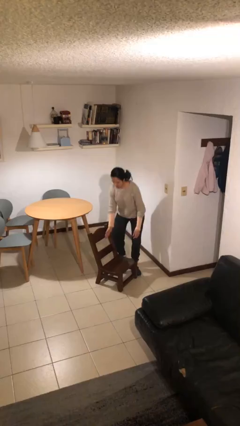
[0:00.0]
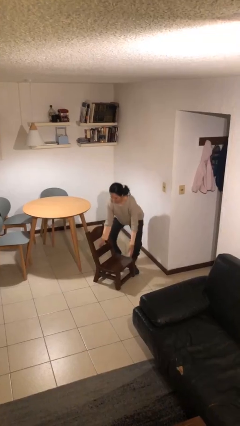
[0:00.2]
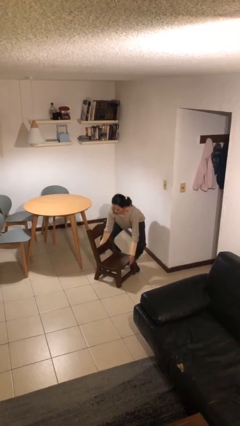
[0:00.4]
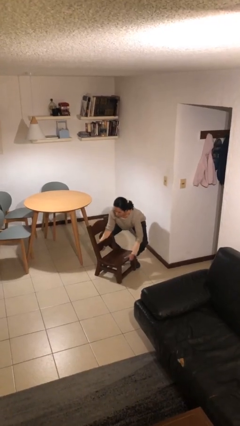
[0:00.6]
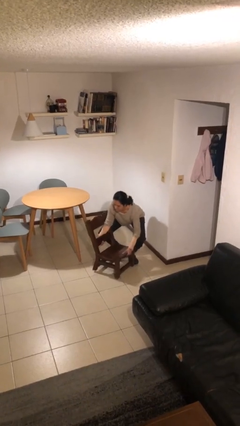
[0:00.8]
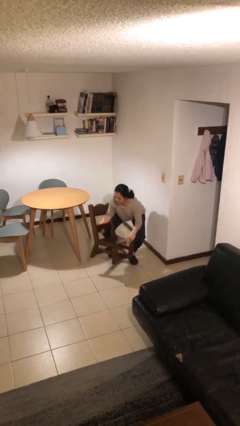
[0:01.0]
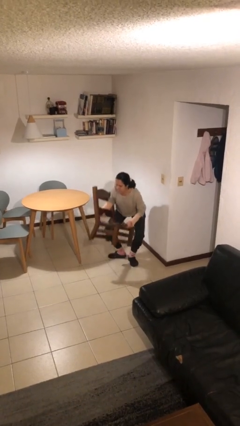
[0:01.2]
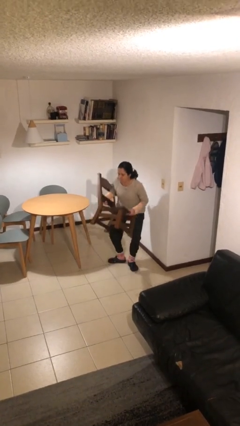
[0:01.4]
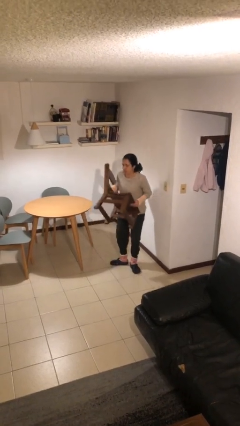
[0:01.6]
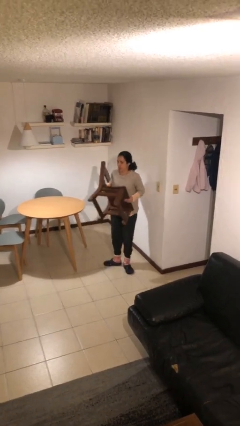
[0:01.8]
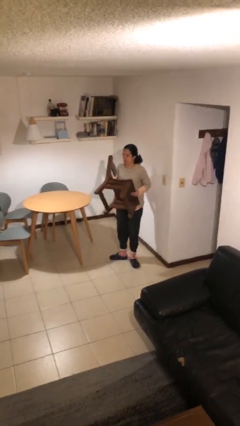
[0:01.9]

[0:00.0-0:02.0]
person picks up object from floor

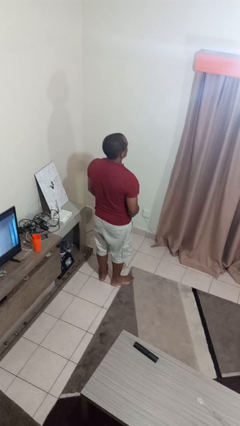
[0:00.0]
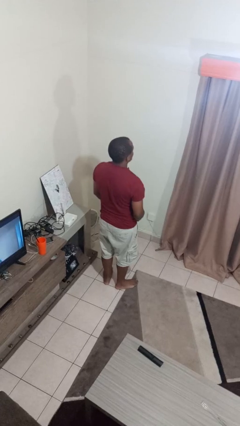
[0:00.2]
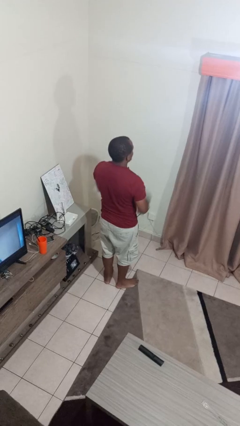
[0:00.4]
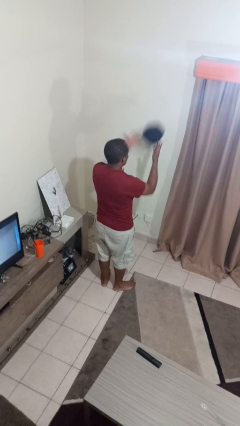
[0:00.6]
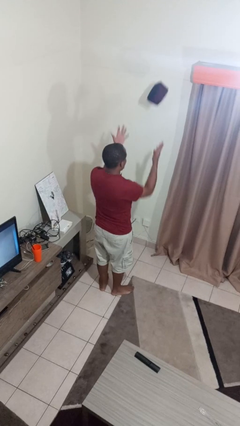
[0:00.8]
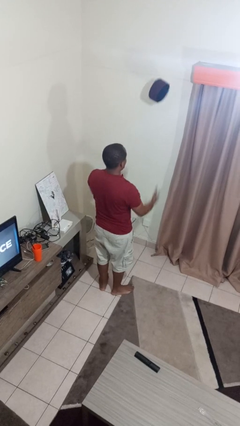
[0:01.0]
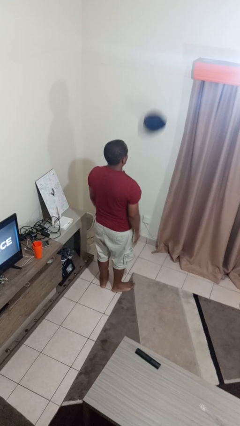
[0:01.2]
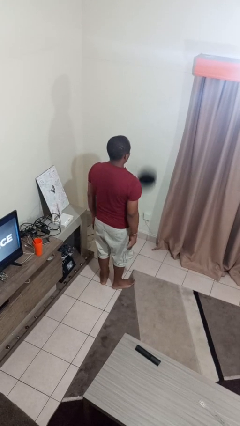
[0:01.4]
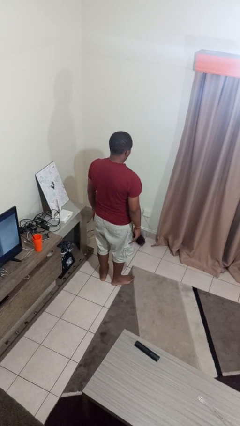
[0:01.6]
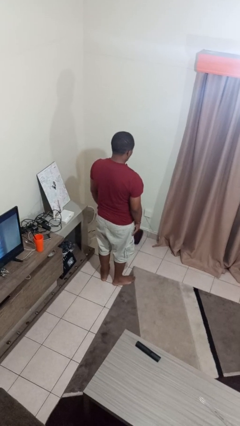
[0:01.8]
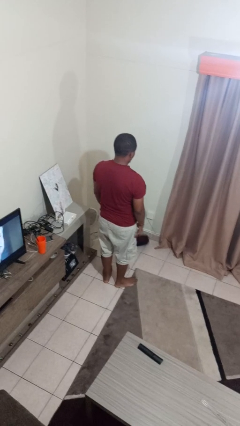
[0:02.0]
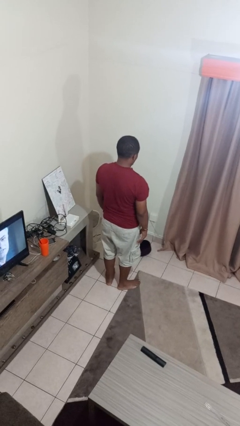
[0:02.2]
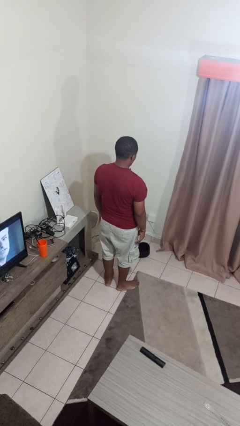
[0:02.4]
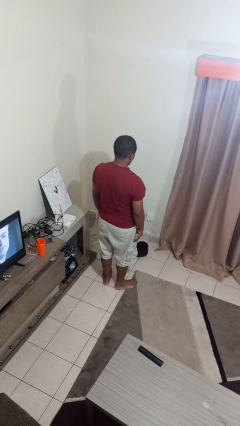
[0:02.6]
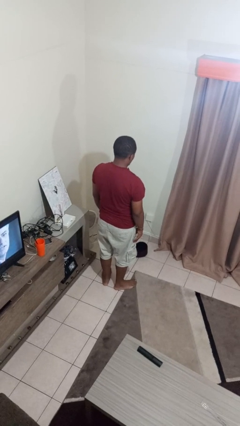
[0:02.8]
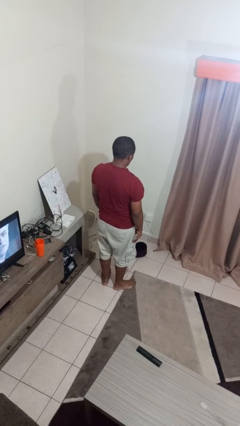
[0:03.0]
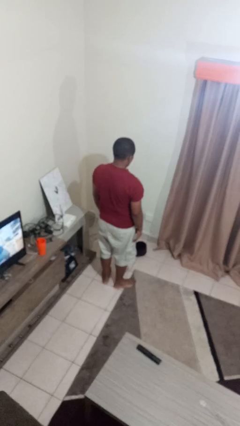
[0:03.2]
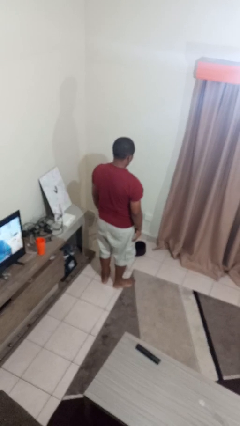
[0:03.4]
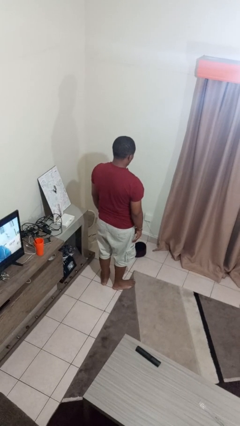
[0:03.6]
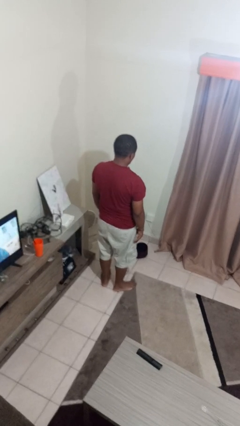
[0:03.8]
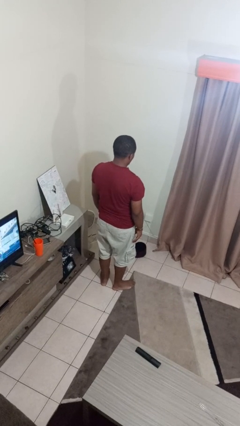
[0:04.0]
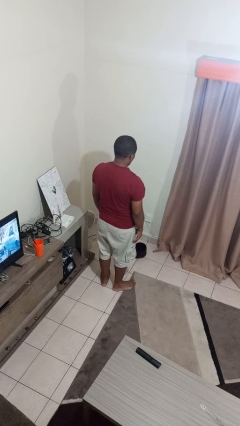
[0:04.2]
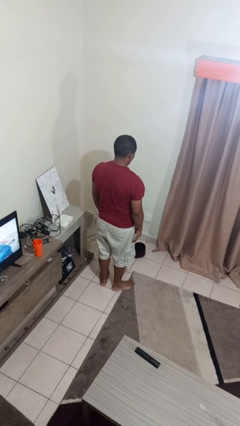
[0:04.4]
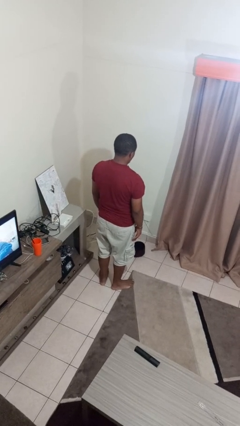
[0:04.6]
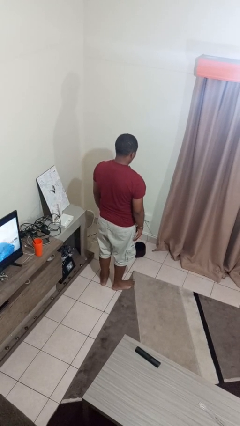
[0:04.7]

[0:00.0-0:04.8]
person throws object into air

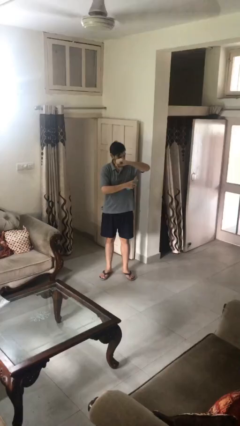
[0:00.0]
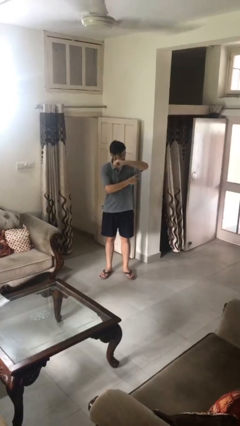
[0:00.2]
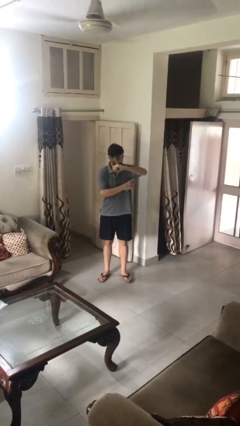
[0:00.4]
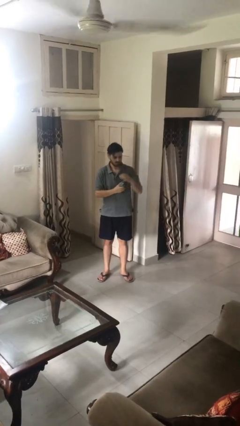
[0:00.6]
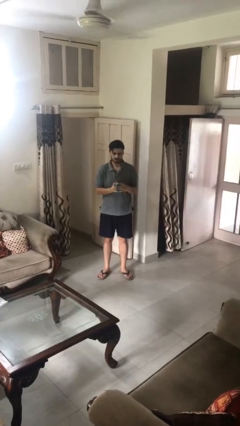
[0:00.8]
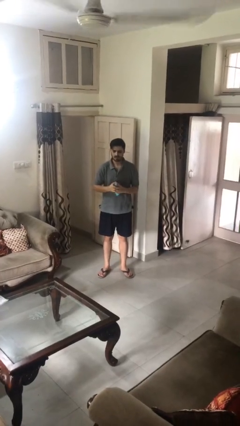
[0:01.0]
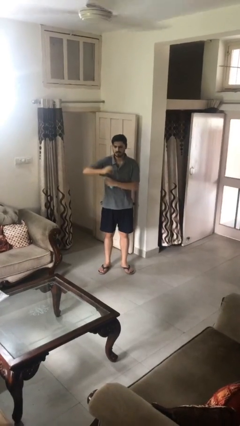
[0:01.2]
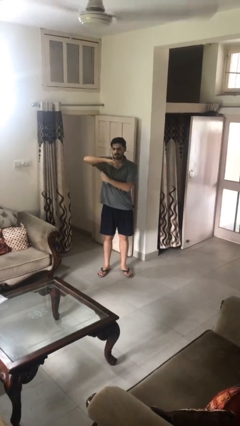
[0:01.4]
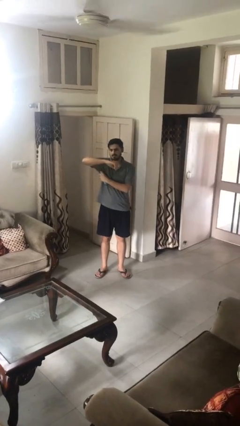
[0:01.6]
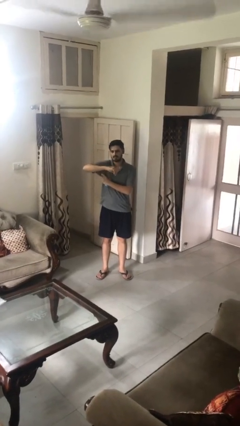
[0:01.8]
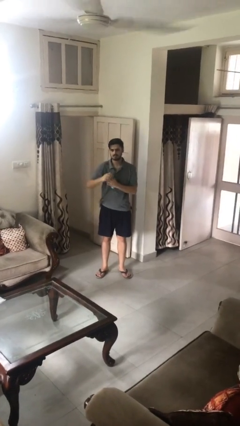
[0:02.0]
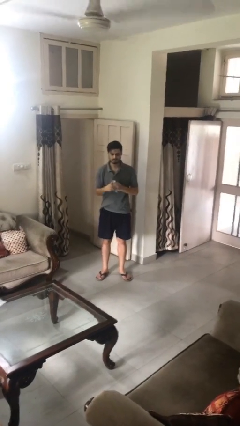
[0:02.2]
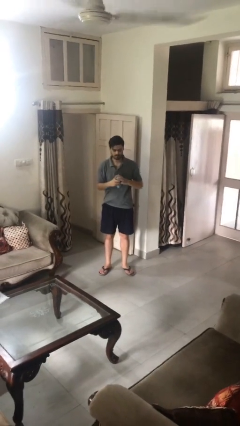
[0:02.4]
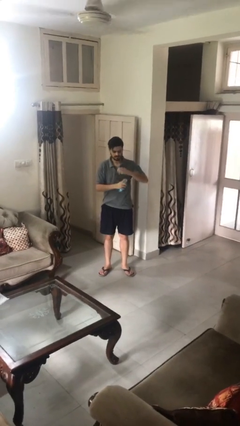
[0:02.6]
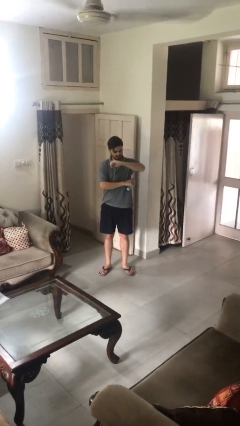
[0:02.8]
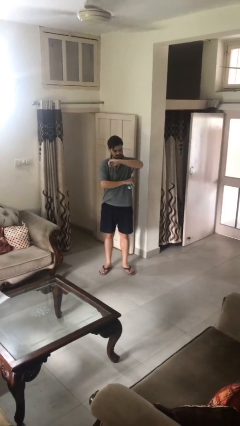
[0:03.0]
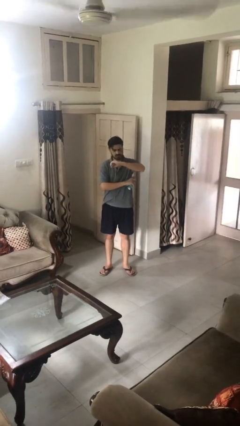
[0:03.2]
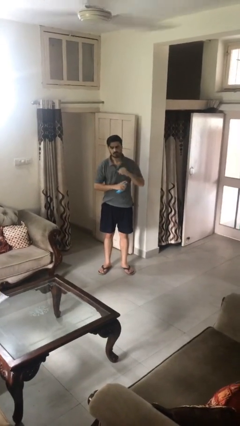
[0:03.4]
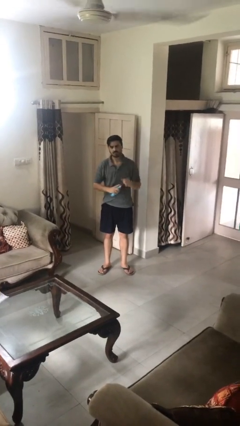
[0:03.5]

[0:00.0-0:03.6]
person applies deodorant

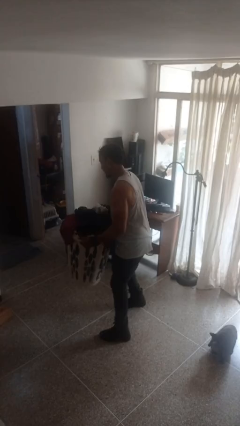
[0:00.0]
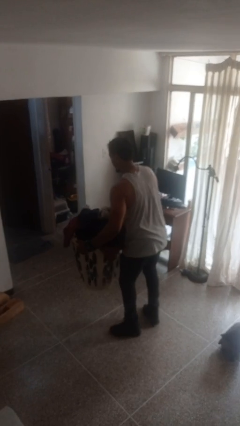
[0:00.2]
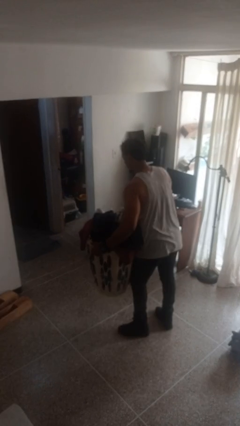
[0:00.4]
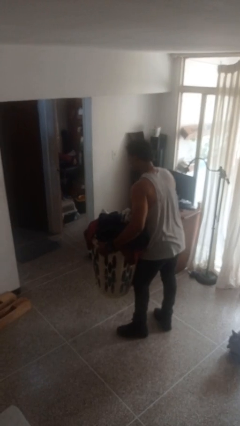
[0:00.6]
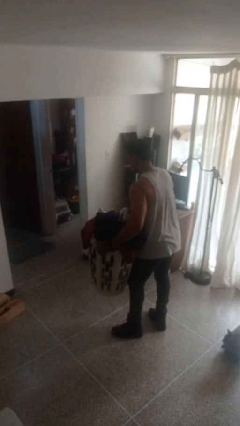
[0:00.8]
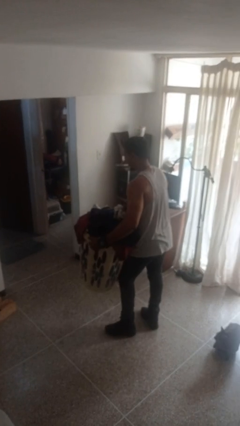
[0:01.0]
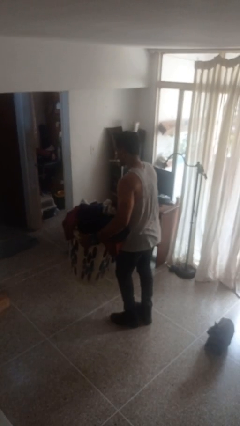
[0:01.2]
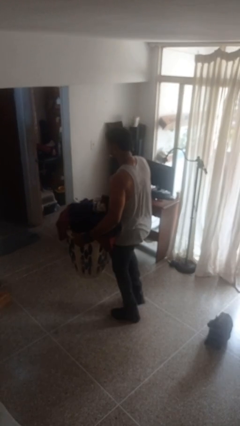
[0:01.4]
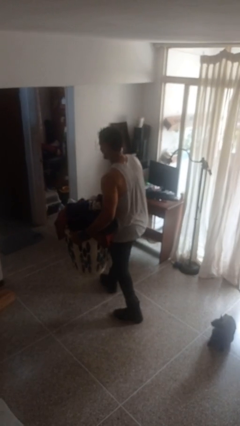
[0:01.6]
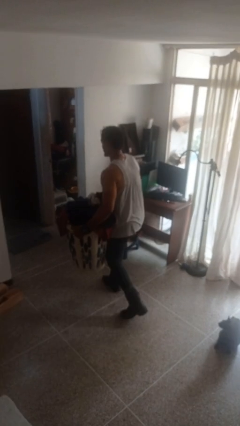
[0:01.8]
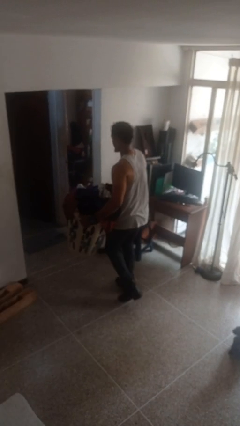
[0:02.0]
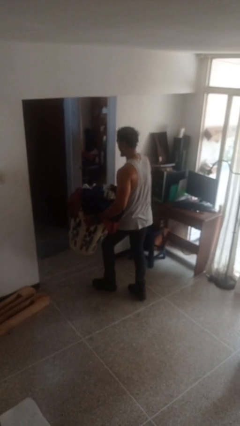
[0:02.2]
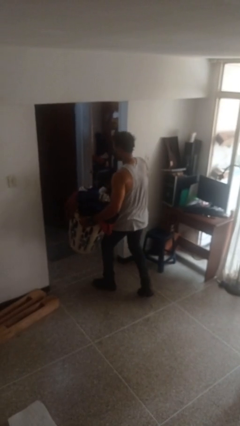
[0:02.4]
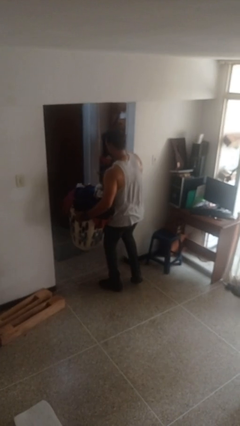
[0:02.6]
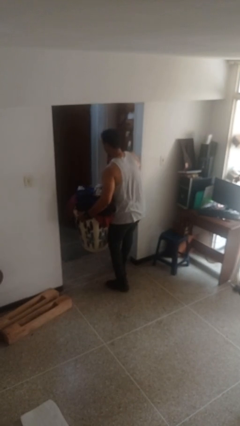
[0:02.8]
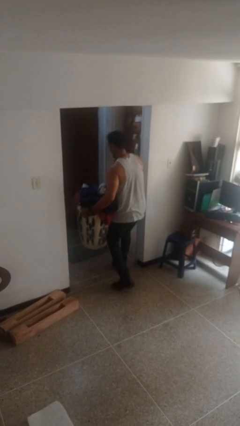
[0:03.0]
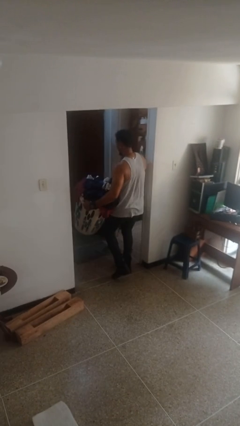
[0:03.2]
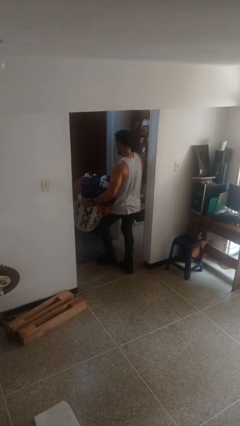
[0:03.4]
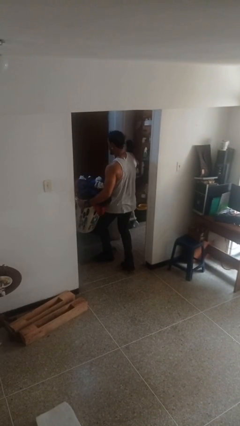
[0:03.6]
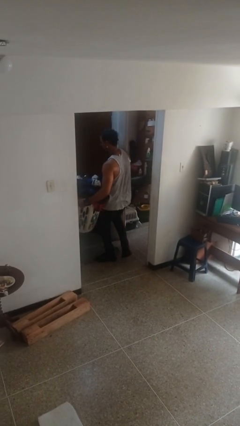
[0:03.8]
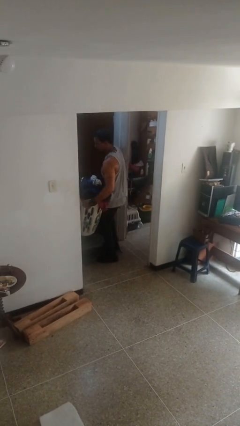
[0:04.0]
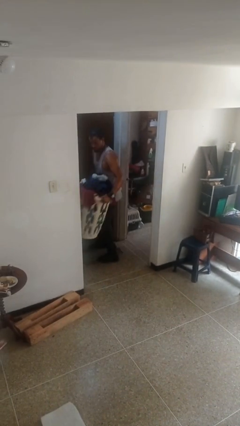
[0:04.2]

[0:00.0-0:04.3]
person carries laundry basket

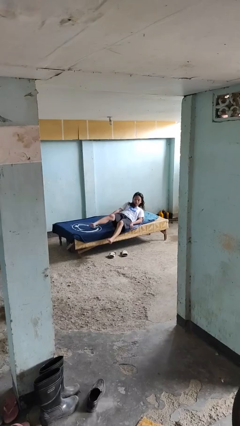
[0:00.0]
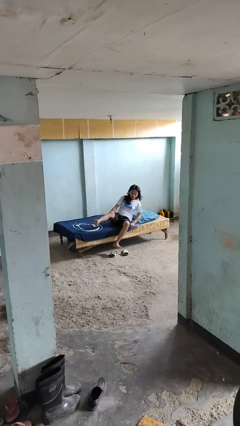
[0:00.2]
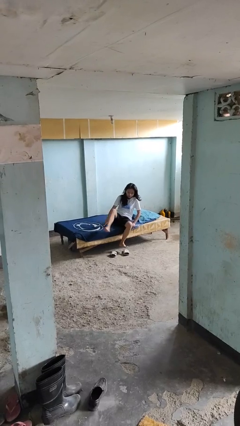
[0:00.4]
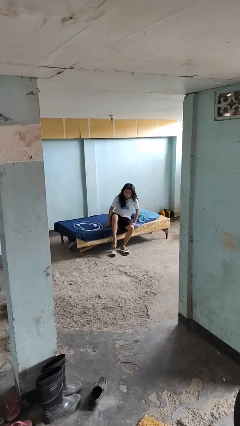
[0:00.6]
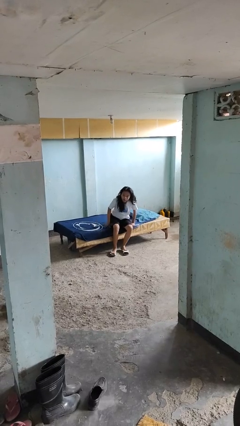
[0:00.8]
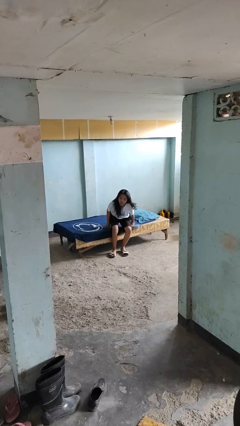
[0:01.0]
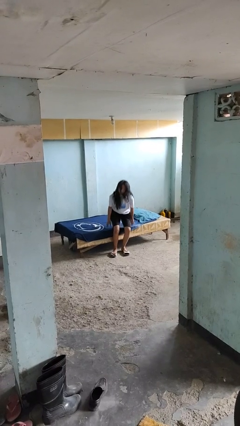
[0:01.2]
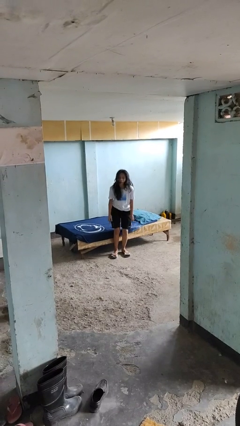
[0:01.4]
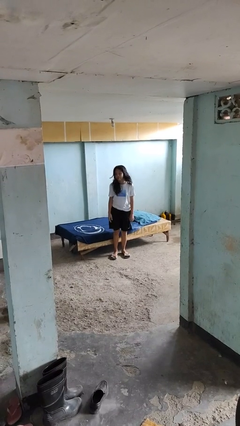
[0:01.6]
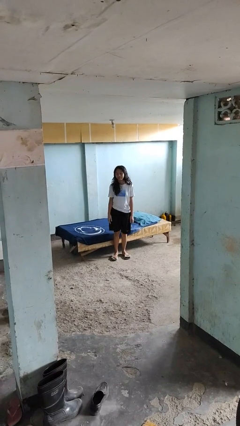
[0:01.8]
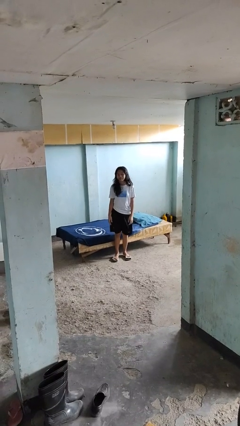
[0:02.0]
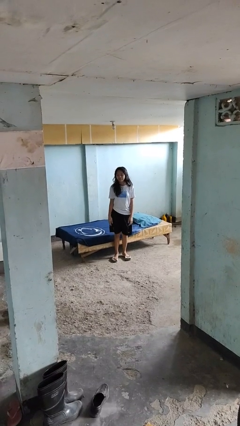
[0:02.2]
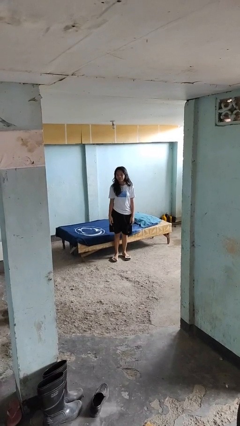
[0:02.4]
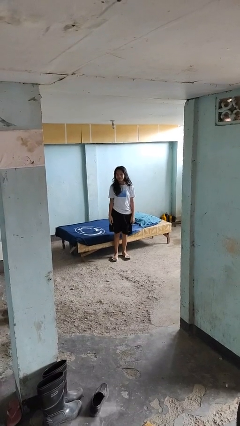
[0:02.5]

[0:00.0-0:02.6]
person stands up

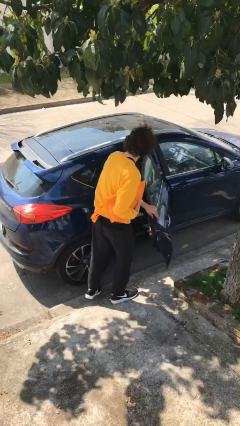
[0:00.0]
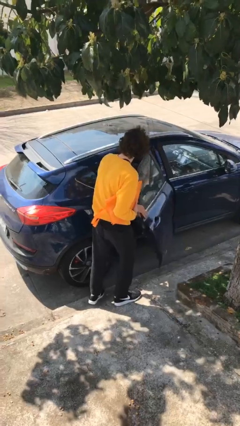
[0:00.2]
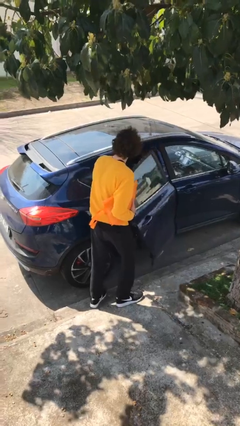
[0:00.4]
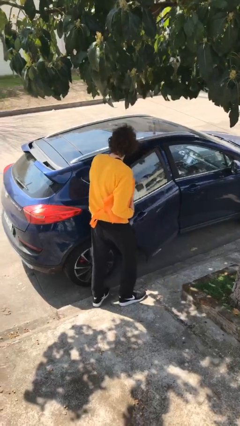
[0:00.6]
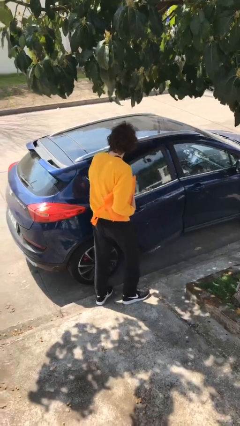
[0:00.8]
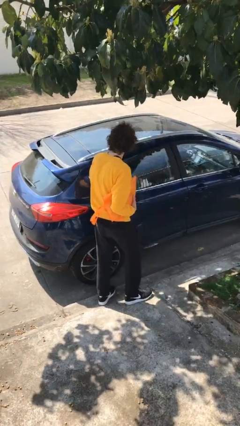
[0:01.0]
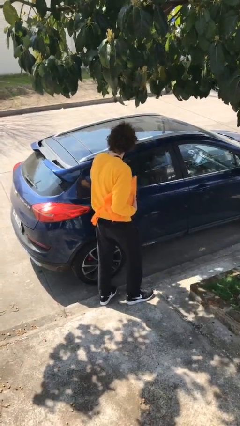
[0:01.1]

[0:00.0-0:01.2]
person closes car door
